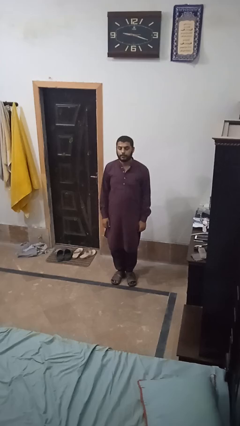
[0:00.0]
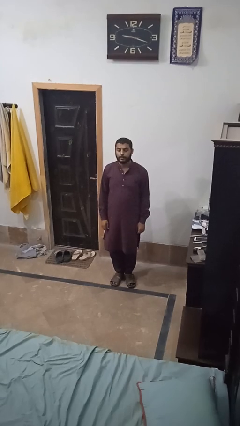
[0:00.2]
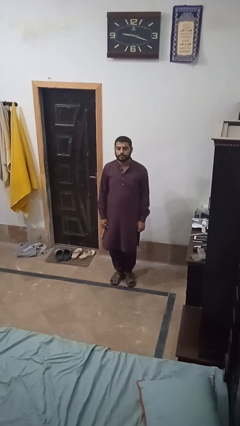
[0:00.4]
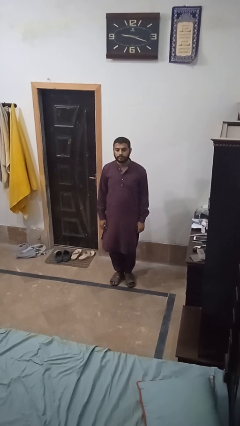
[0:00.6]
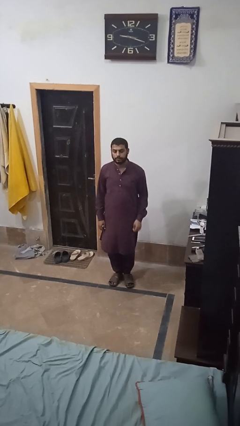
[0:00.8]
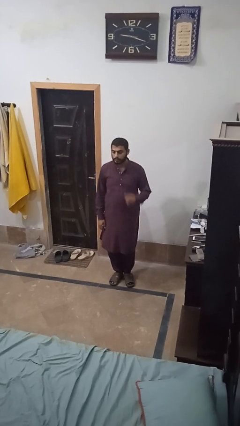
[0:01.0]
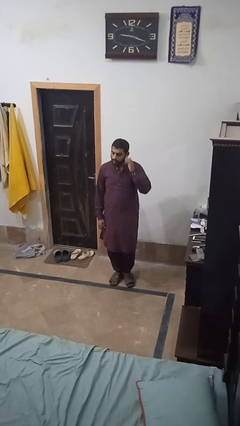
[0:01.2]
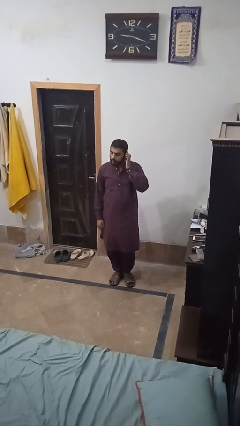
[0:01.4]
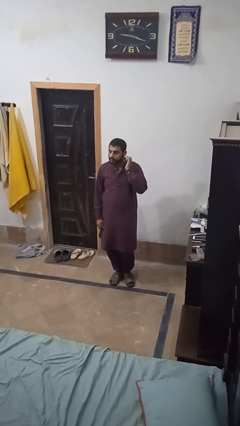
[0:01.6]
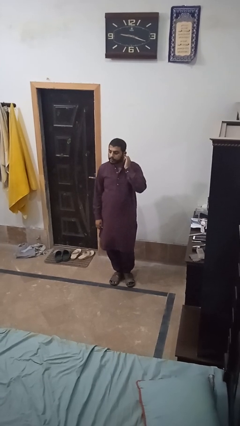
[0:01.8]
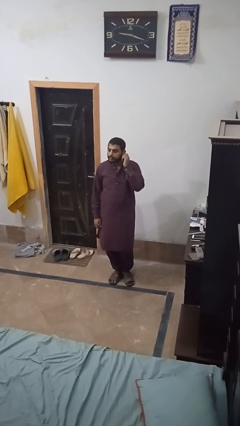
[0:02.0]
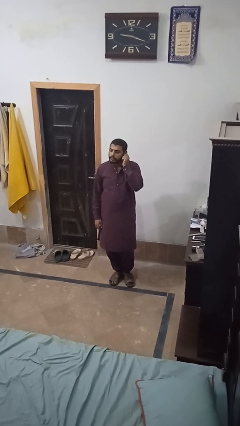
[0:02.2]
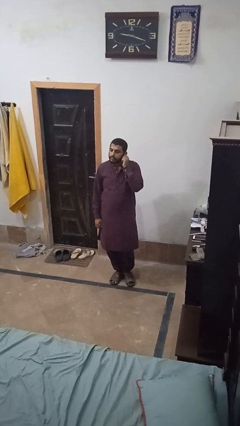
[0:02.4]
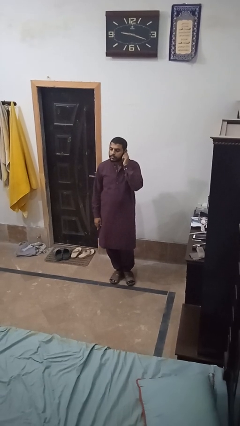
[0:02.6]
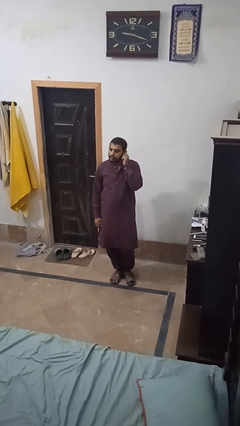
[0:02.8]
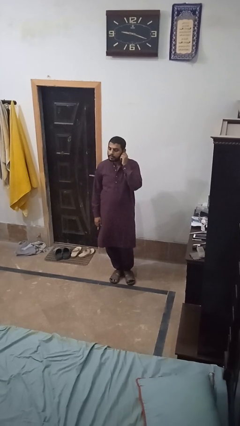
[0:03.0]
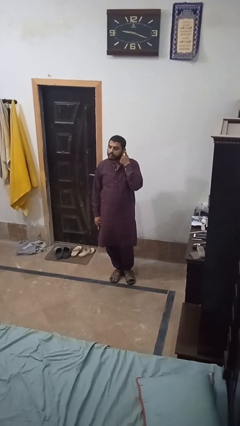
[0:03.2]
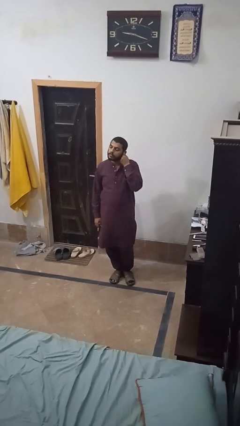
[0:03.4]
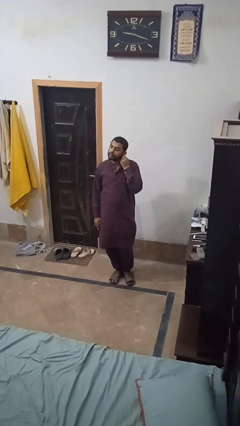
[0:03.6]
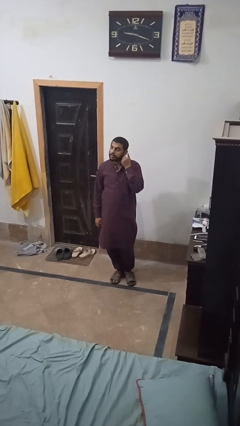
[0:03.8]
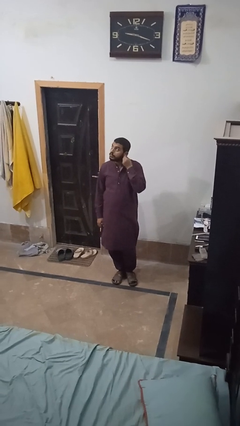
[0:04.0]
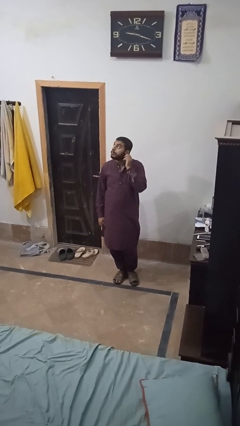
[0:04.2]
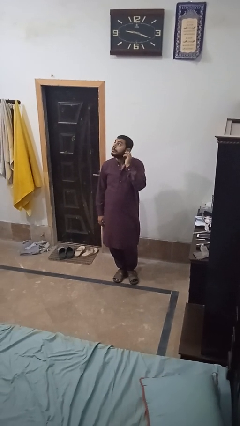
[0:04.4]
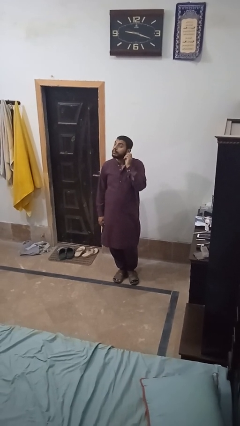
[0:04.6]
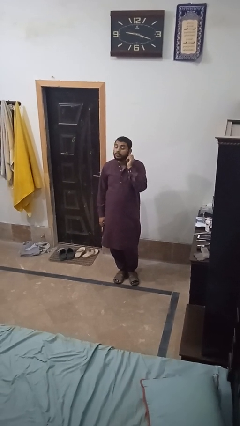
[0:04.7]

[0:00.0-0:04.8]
person touches earlobe

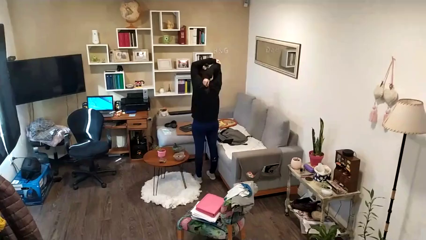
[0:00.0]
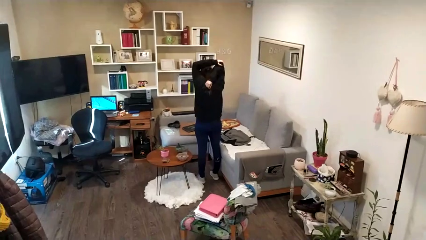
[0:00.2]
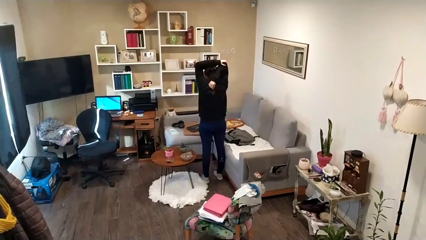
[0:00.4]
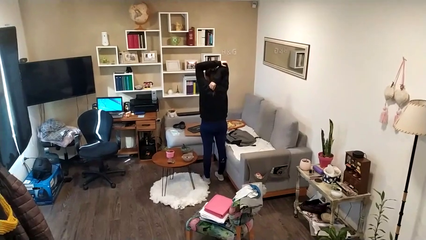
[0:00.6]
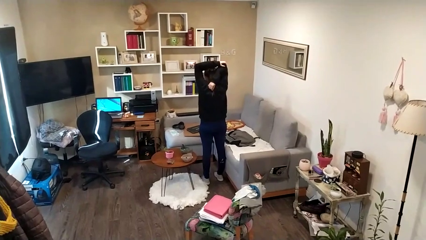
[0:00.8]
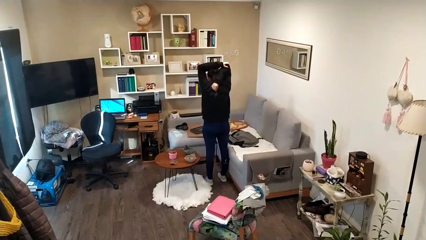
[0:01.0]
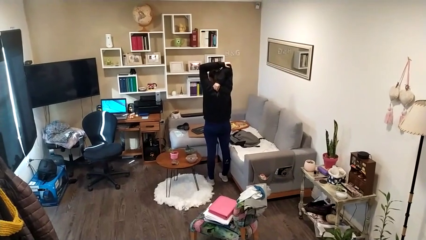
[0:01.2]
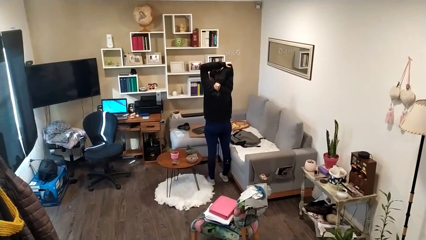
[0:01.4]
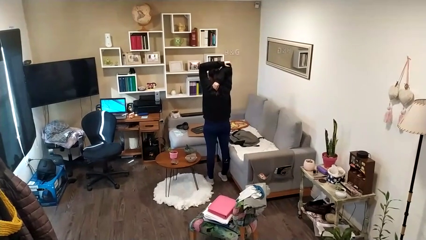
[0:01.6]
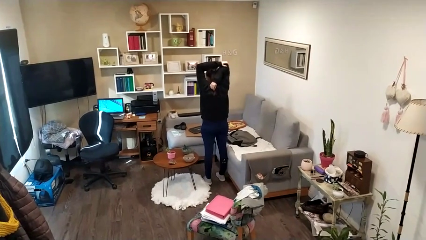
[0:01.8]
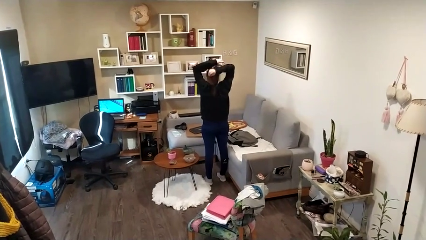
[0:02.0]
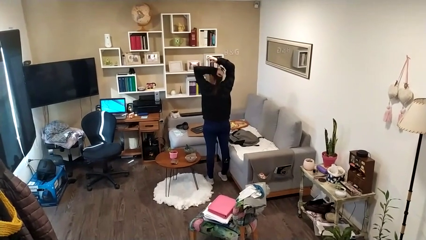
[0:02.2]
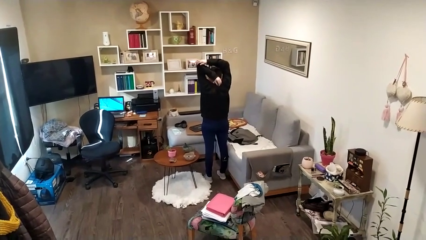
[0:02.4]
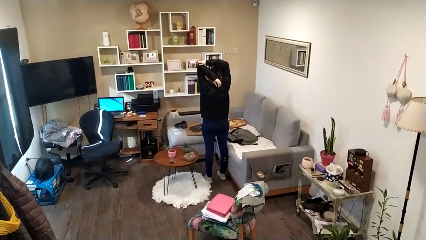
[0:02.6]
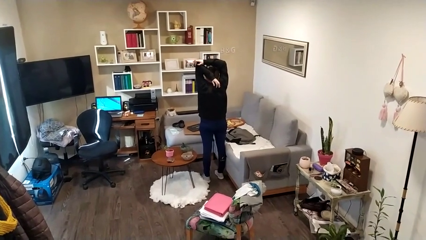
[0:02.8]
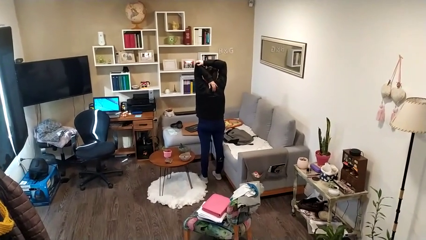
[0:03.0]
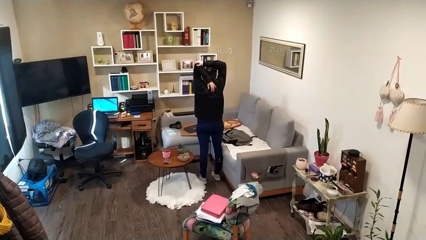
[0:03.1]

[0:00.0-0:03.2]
person stretches arms over head

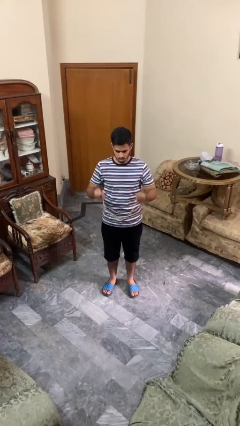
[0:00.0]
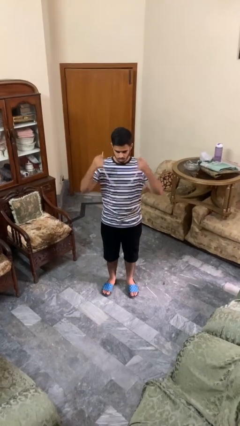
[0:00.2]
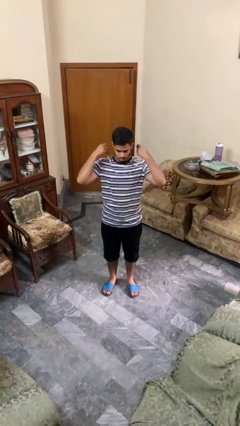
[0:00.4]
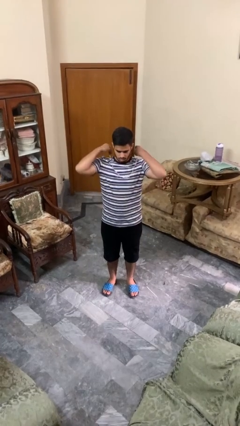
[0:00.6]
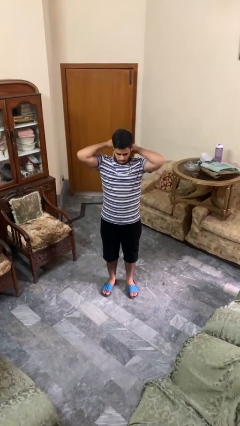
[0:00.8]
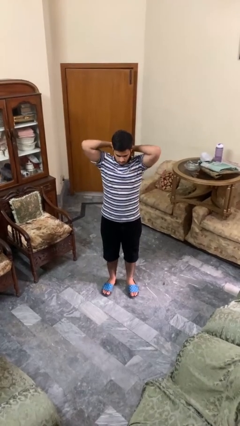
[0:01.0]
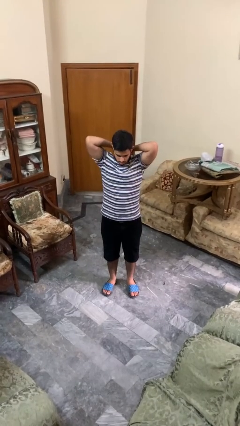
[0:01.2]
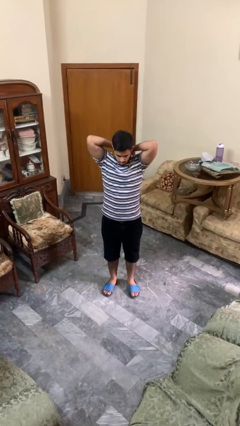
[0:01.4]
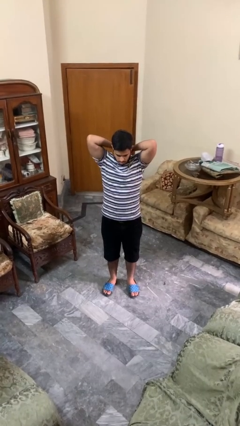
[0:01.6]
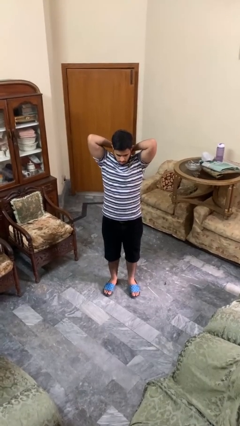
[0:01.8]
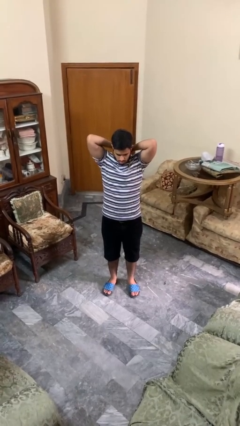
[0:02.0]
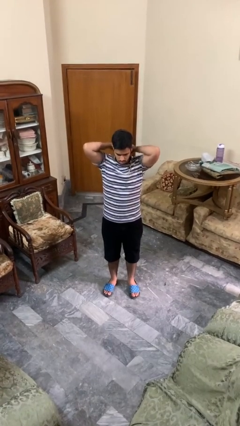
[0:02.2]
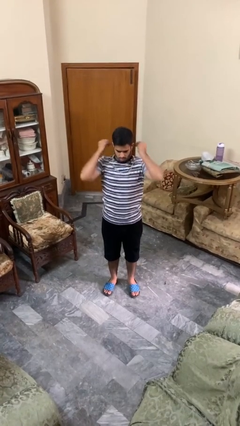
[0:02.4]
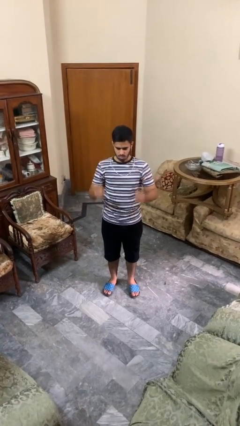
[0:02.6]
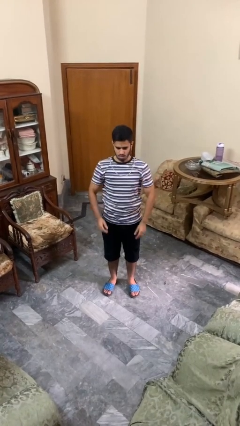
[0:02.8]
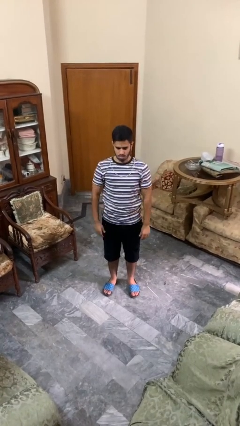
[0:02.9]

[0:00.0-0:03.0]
person puts on necklace

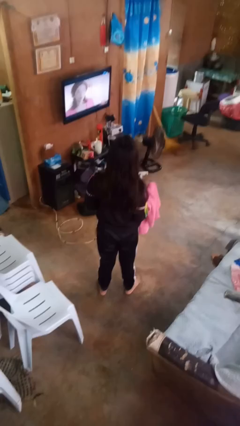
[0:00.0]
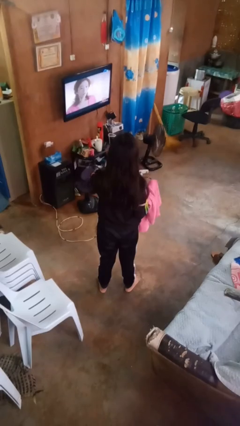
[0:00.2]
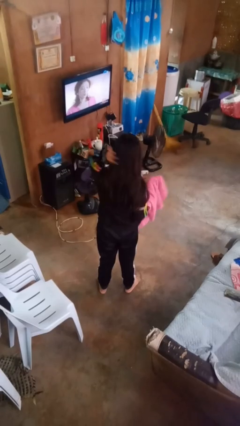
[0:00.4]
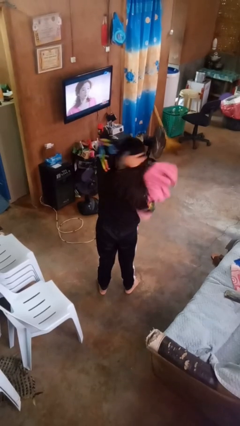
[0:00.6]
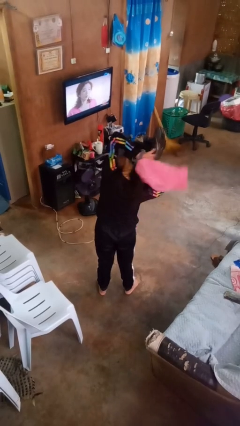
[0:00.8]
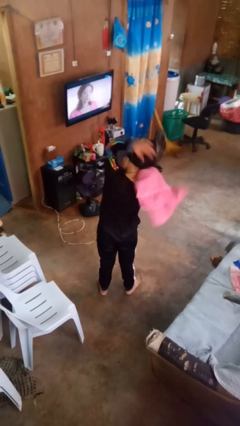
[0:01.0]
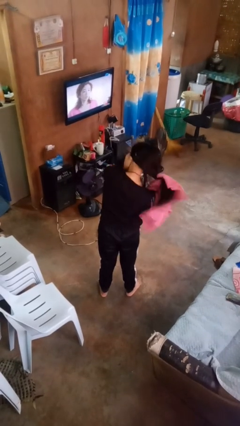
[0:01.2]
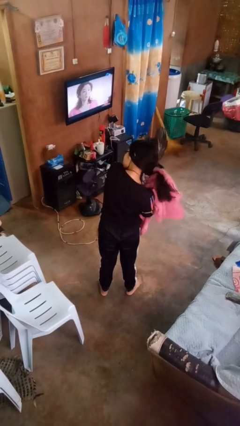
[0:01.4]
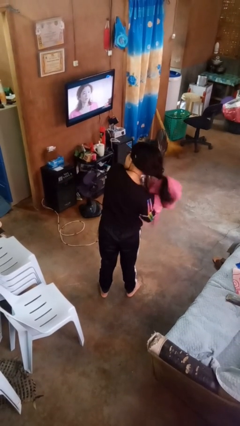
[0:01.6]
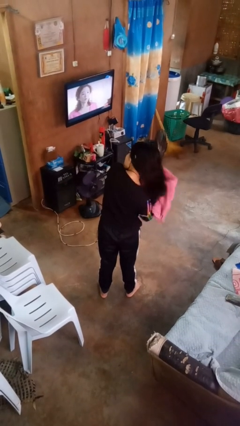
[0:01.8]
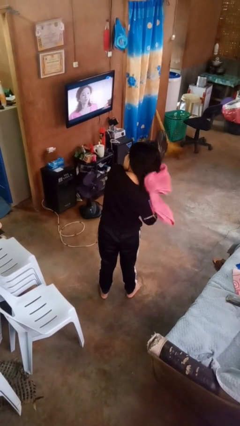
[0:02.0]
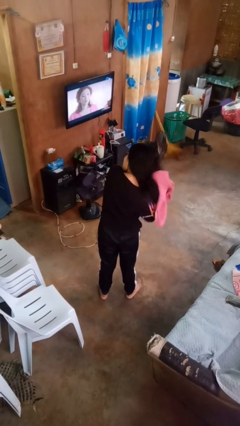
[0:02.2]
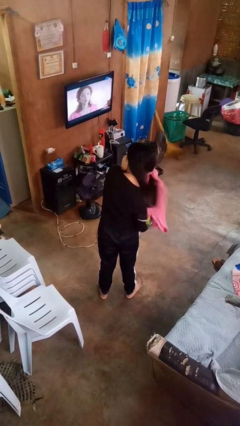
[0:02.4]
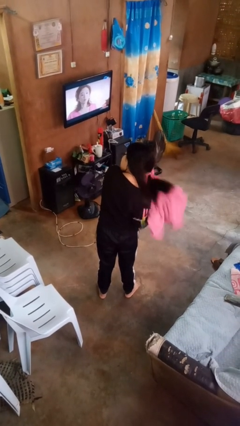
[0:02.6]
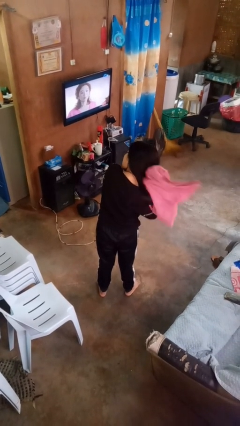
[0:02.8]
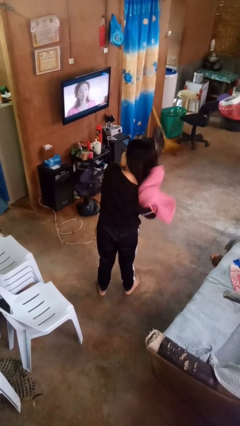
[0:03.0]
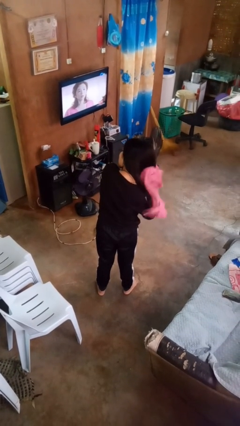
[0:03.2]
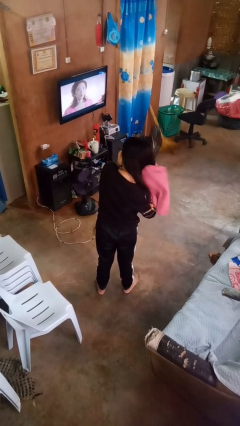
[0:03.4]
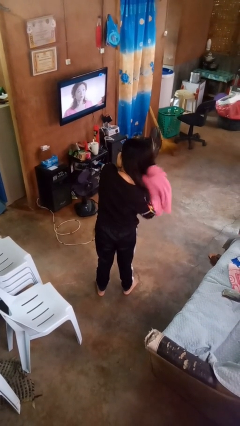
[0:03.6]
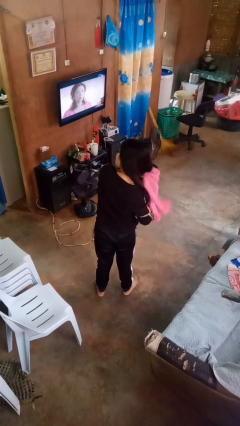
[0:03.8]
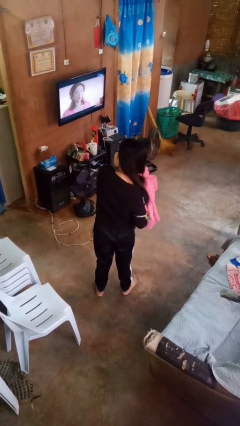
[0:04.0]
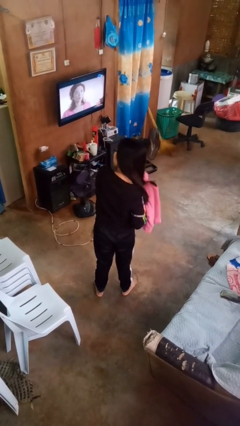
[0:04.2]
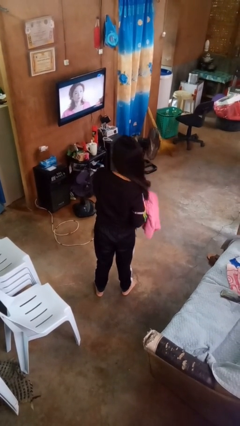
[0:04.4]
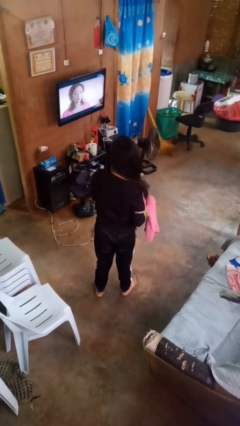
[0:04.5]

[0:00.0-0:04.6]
person dries hair with towel

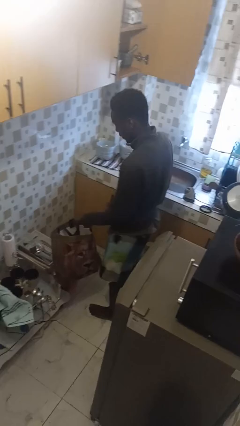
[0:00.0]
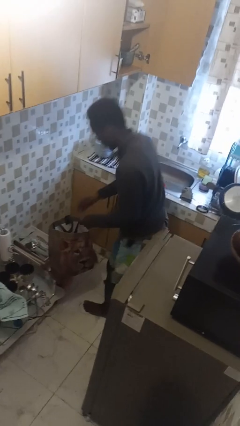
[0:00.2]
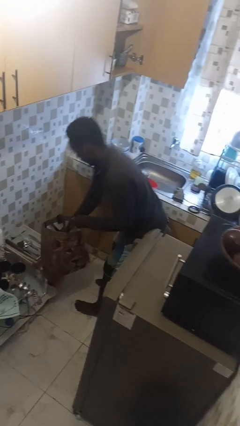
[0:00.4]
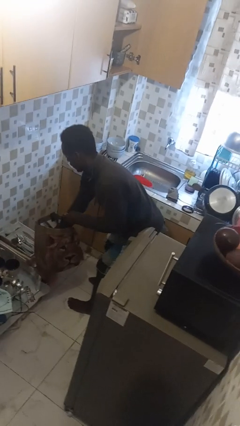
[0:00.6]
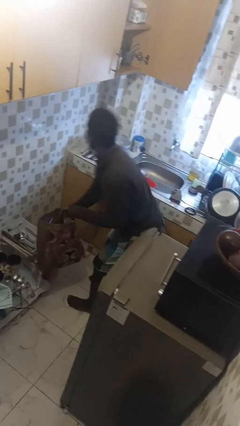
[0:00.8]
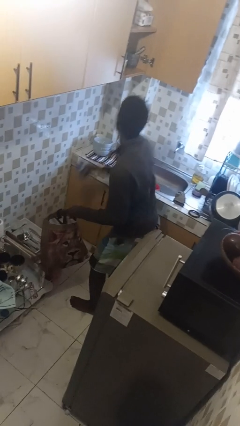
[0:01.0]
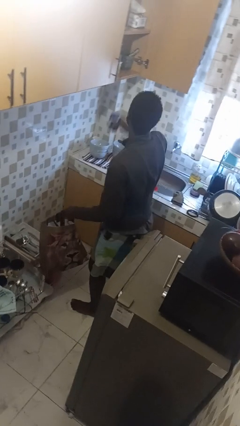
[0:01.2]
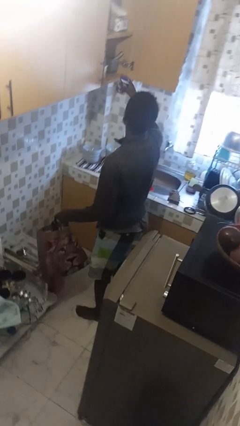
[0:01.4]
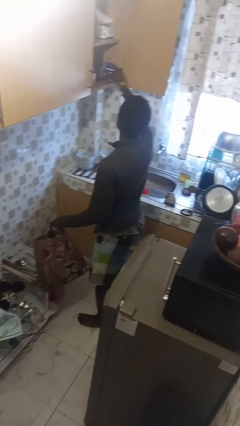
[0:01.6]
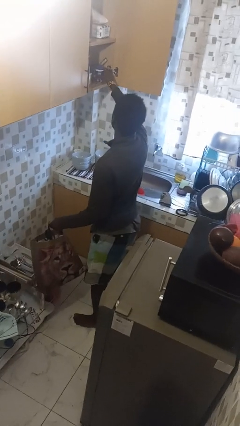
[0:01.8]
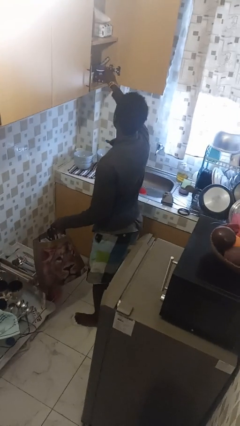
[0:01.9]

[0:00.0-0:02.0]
person loads groceries into cabinet

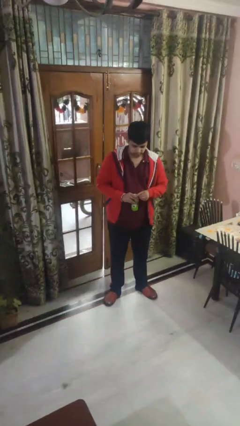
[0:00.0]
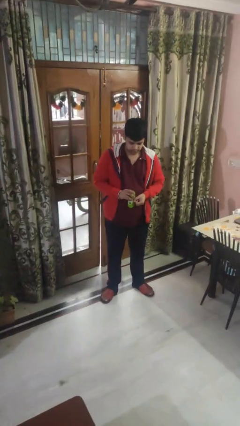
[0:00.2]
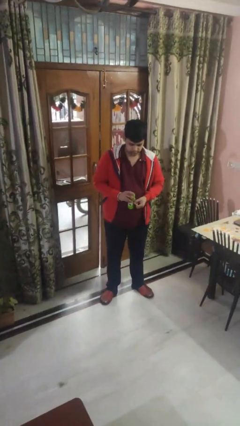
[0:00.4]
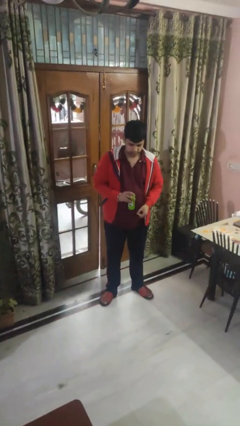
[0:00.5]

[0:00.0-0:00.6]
person opens beverage can
